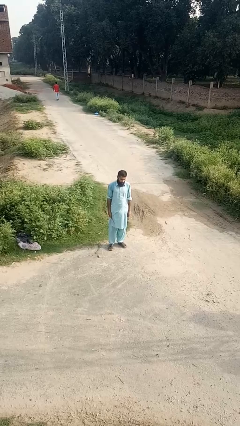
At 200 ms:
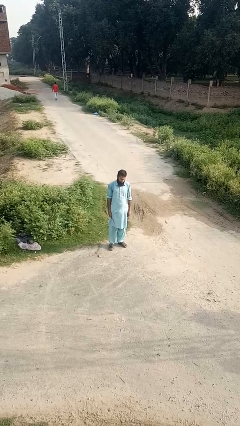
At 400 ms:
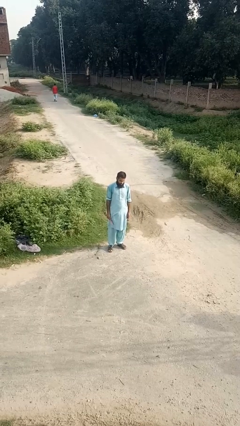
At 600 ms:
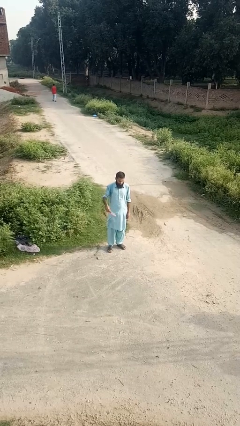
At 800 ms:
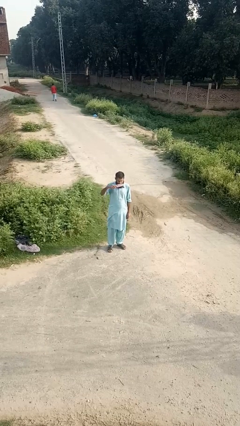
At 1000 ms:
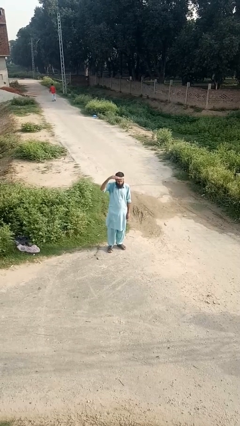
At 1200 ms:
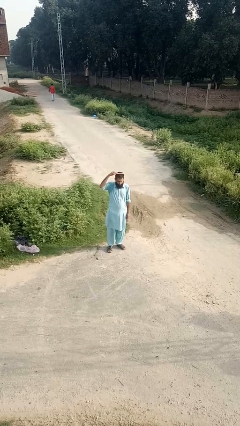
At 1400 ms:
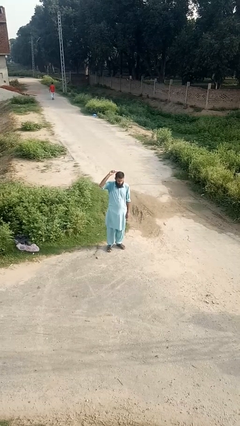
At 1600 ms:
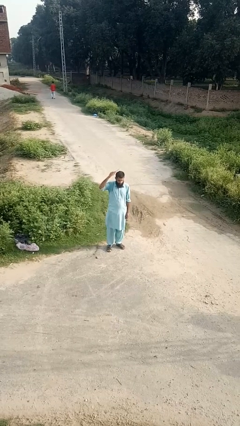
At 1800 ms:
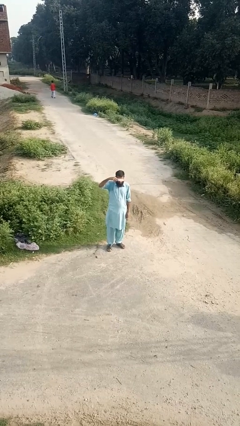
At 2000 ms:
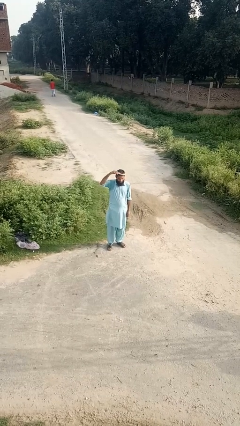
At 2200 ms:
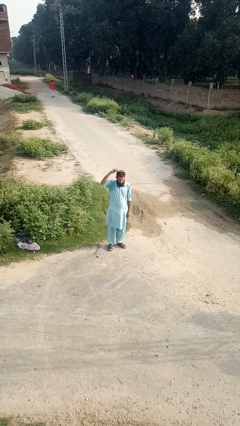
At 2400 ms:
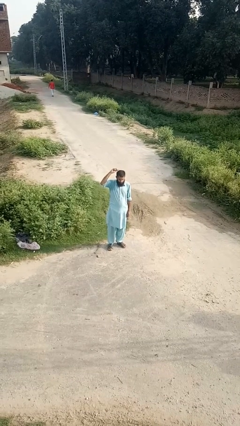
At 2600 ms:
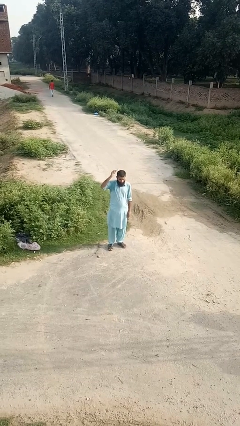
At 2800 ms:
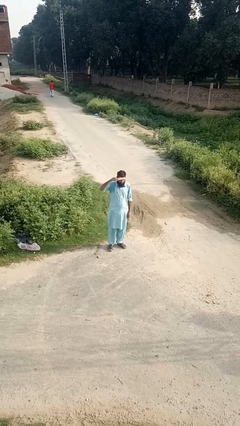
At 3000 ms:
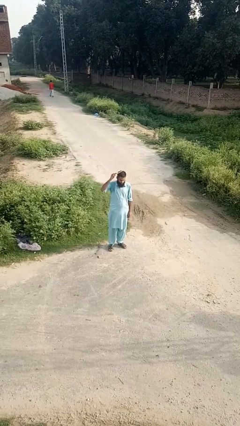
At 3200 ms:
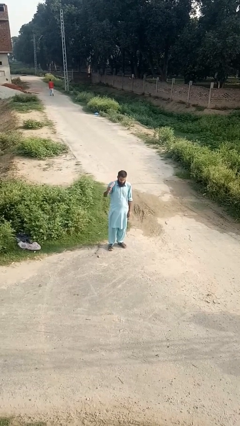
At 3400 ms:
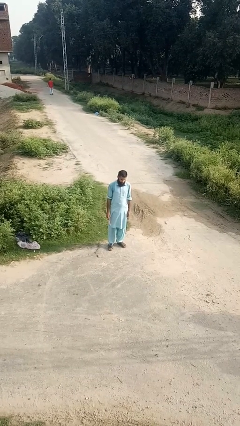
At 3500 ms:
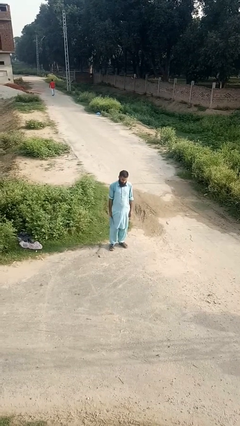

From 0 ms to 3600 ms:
person brushes hair

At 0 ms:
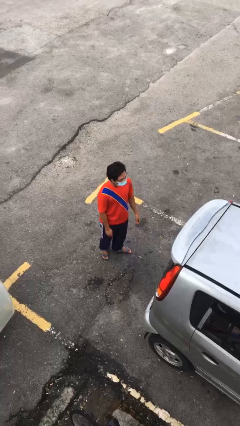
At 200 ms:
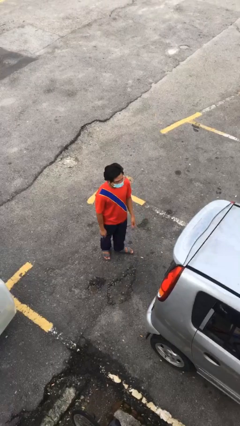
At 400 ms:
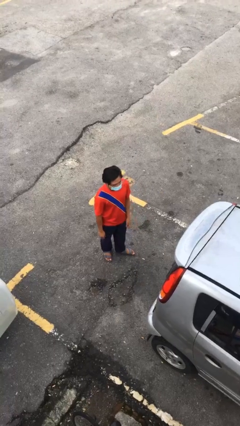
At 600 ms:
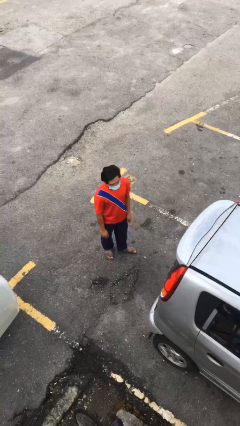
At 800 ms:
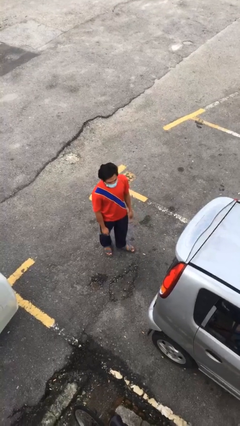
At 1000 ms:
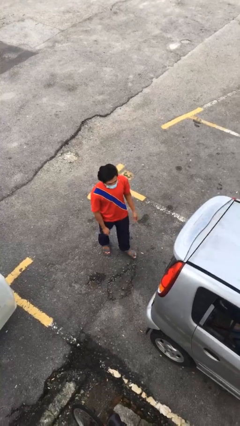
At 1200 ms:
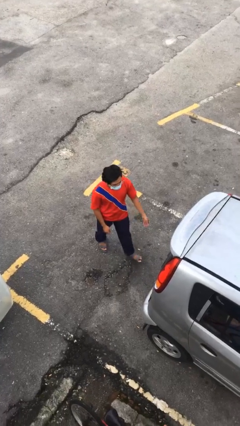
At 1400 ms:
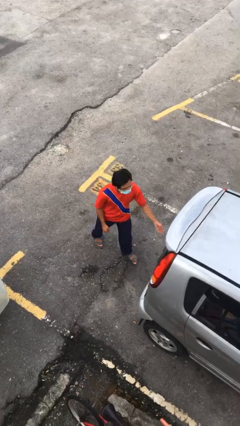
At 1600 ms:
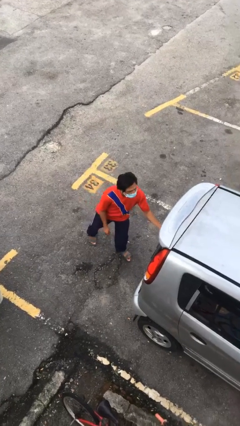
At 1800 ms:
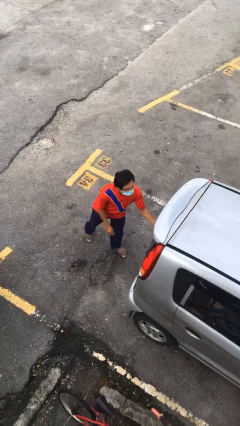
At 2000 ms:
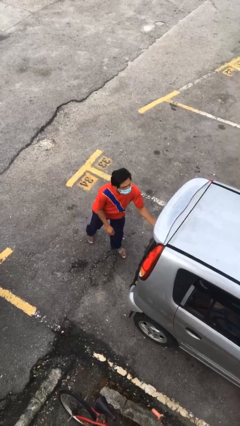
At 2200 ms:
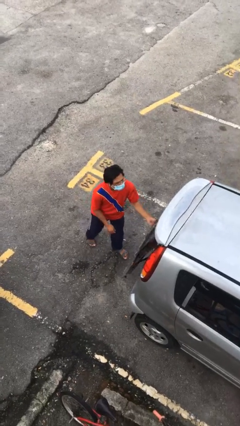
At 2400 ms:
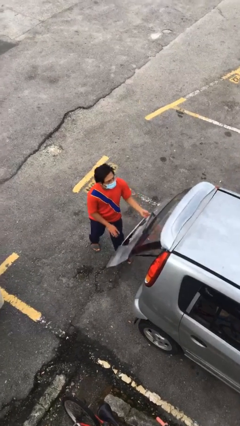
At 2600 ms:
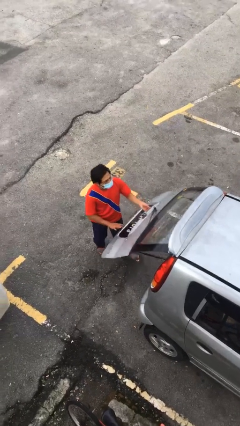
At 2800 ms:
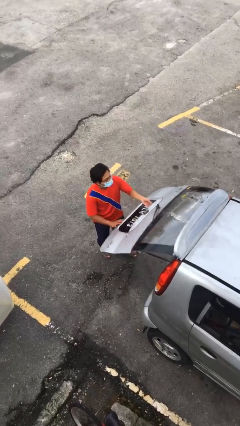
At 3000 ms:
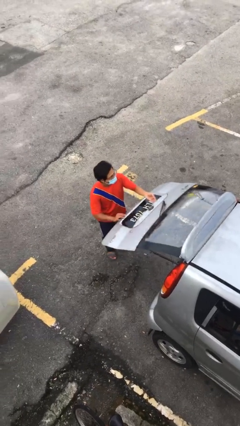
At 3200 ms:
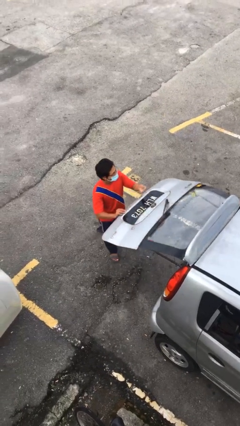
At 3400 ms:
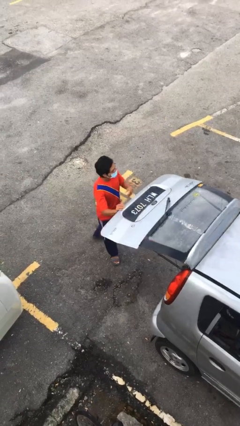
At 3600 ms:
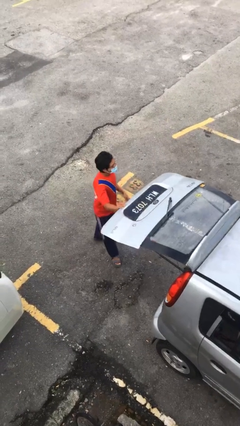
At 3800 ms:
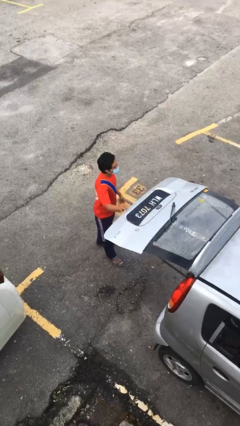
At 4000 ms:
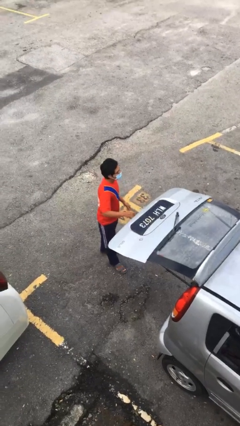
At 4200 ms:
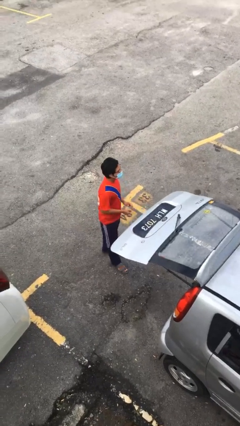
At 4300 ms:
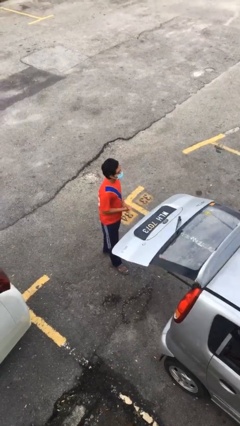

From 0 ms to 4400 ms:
person opens car trunk

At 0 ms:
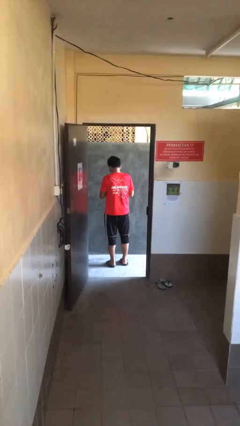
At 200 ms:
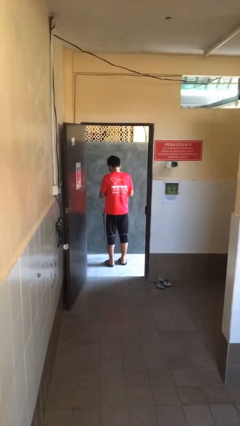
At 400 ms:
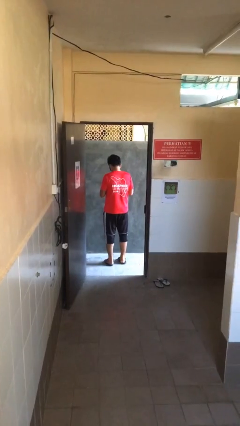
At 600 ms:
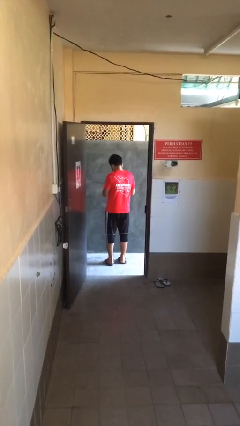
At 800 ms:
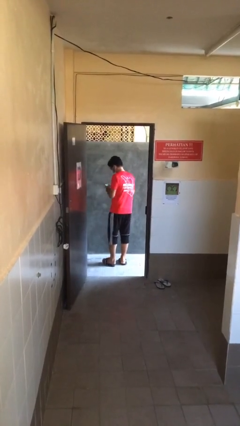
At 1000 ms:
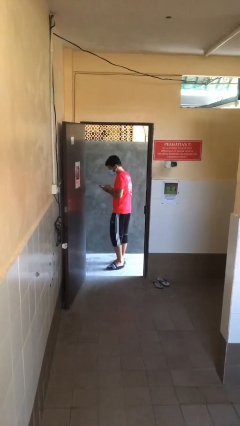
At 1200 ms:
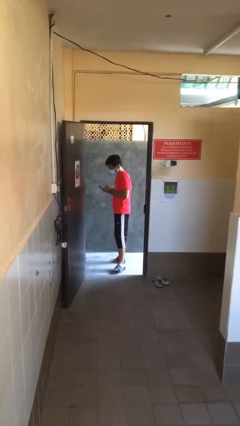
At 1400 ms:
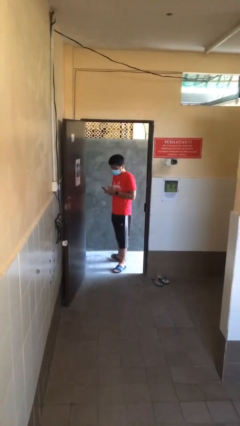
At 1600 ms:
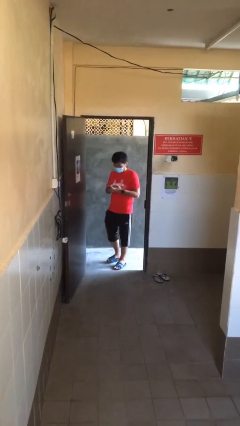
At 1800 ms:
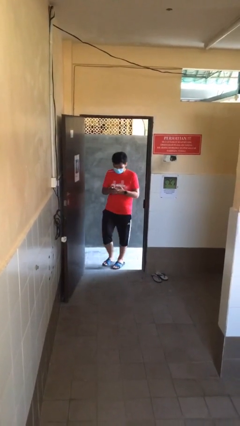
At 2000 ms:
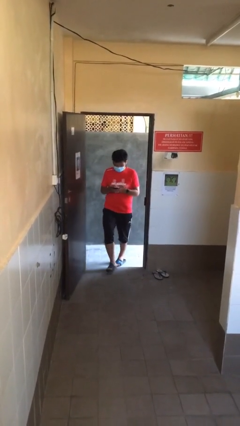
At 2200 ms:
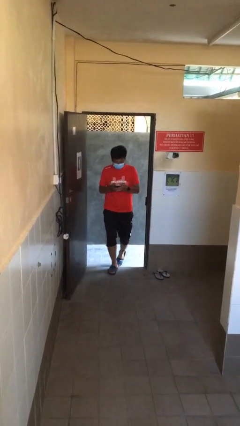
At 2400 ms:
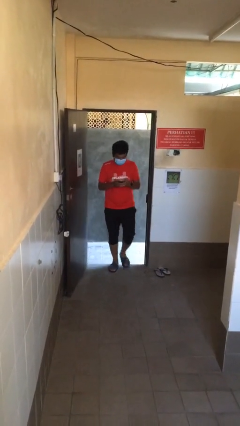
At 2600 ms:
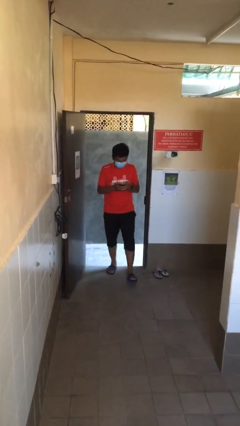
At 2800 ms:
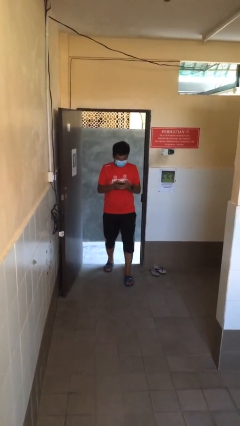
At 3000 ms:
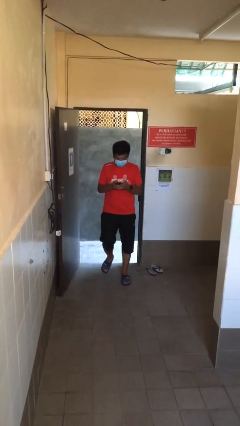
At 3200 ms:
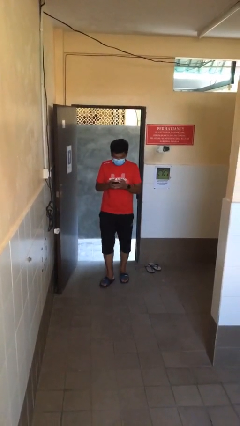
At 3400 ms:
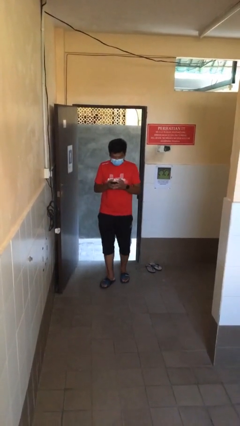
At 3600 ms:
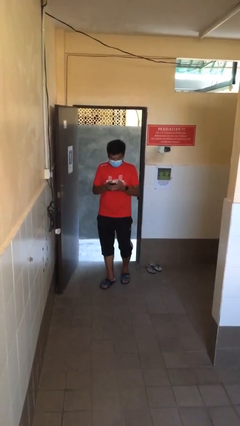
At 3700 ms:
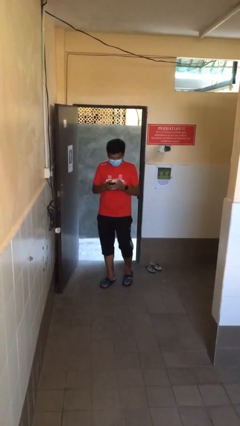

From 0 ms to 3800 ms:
person enters scene through structure

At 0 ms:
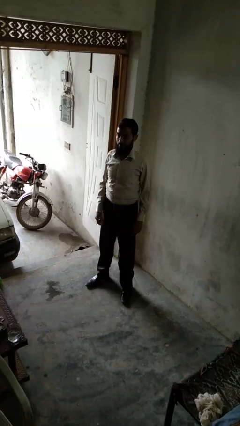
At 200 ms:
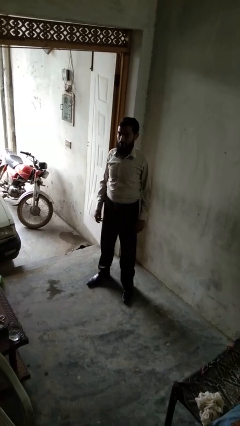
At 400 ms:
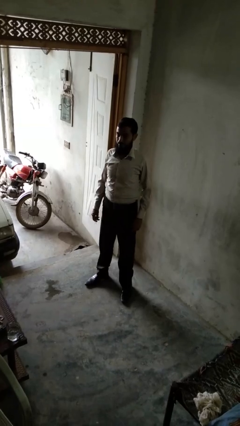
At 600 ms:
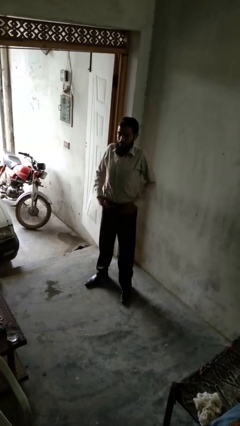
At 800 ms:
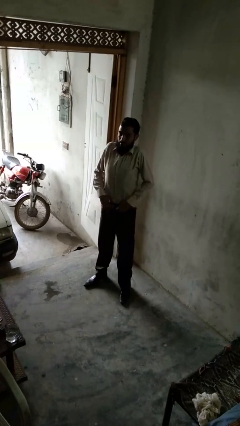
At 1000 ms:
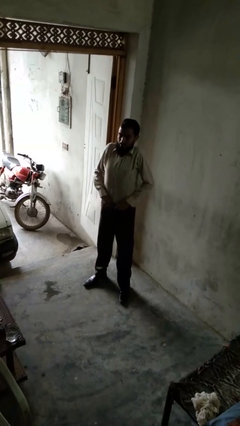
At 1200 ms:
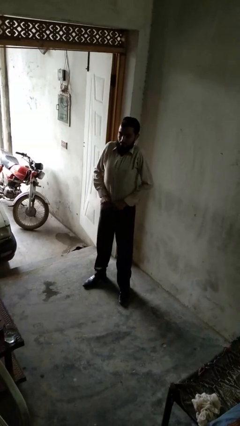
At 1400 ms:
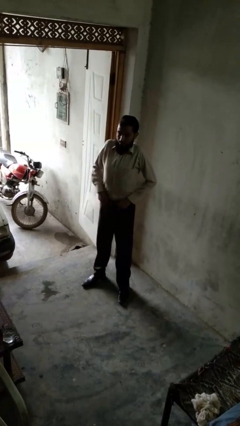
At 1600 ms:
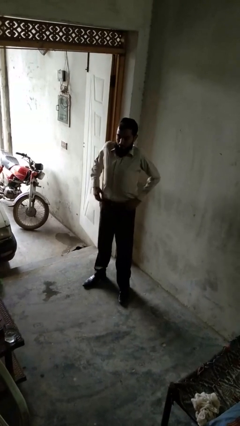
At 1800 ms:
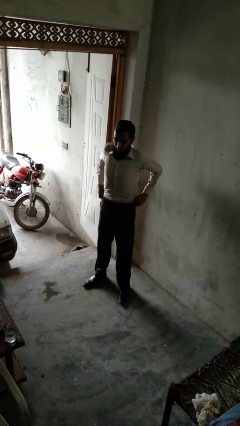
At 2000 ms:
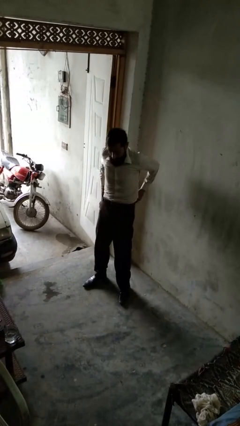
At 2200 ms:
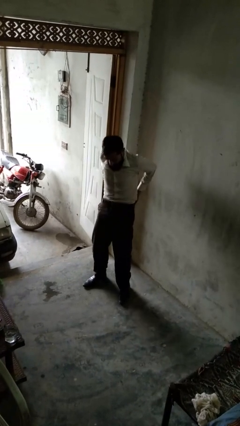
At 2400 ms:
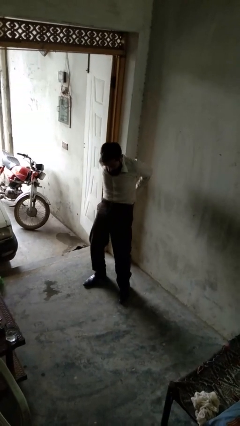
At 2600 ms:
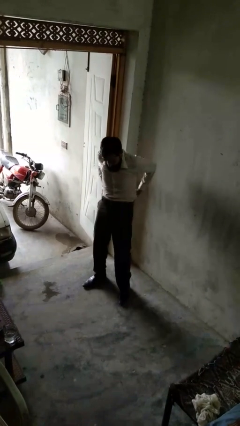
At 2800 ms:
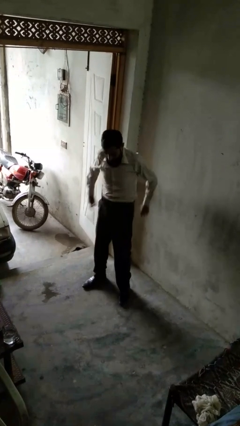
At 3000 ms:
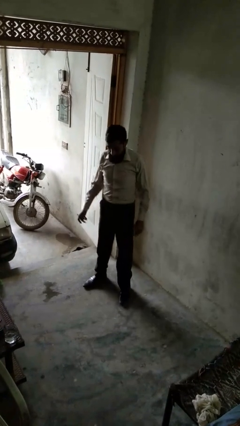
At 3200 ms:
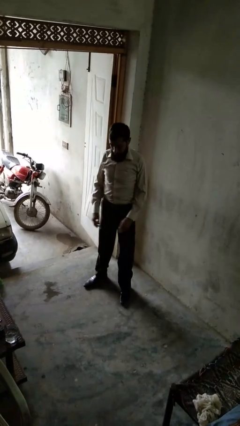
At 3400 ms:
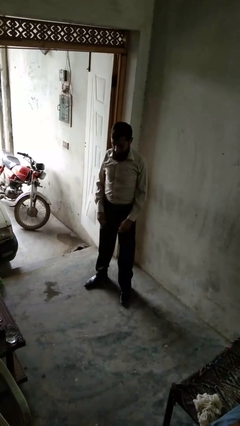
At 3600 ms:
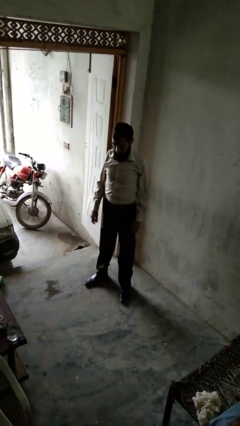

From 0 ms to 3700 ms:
person hikes up pants

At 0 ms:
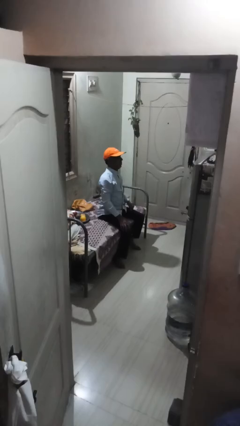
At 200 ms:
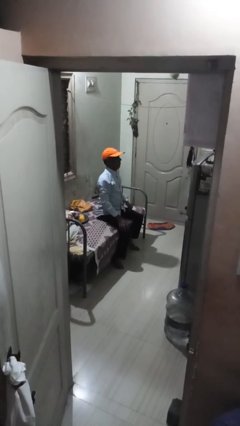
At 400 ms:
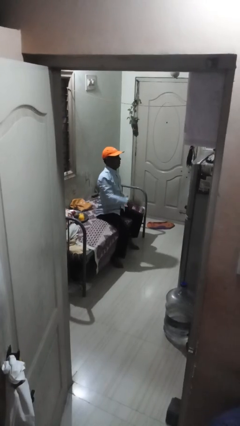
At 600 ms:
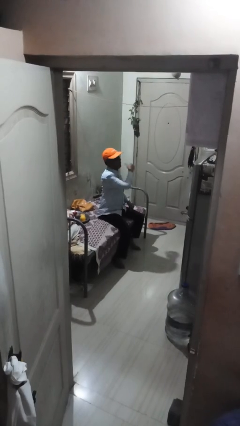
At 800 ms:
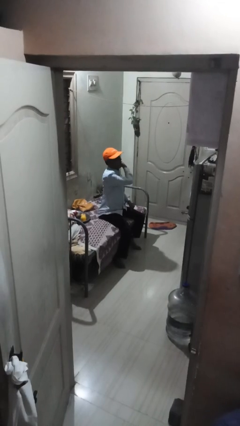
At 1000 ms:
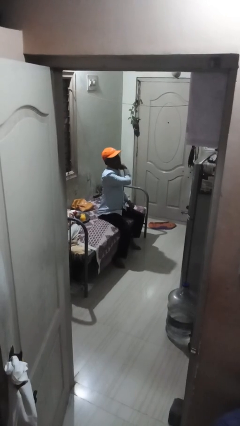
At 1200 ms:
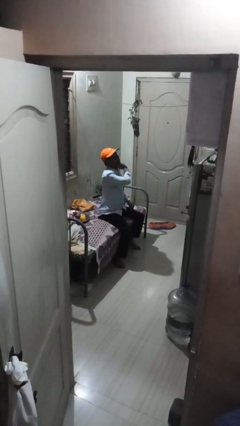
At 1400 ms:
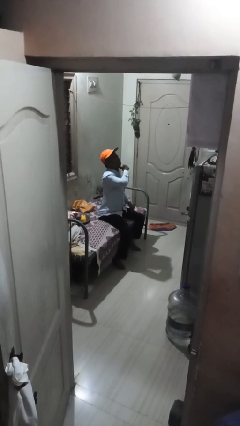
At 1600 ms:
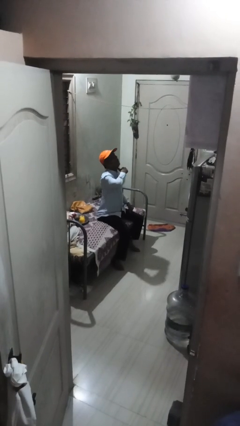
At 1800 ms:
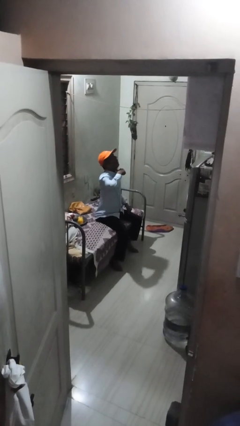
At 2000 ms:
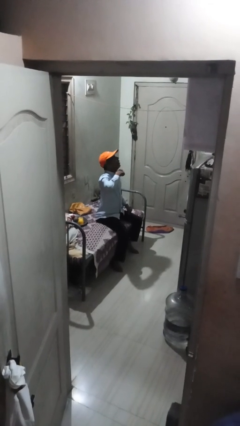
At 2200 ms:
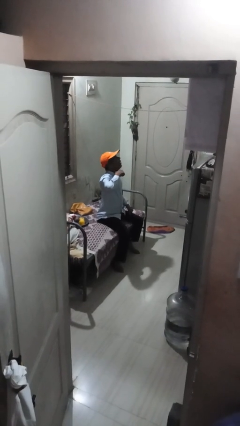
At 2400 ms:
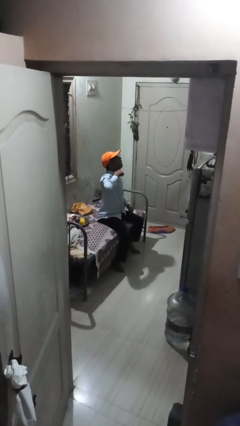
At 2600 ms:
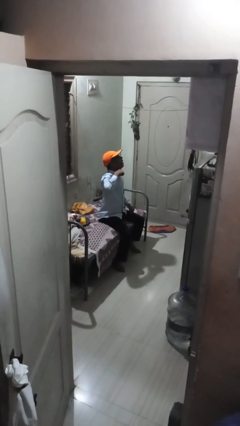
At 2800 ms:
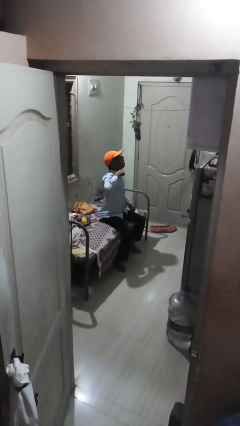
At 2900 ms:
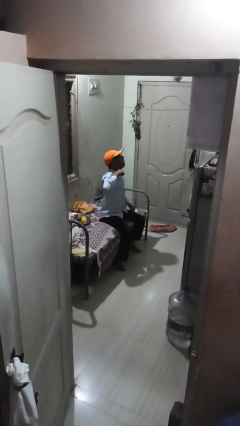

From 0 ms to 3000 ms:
person gestures cut
